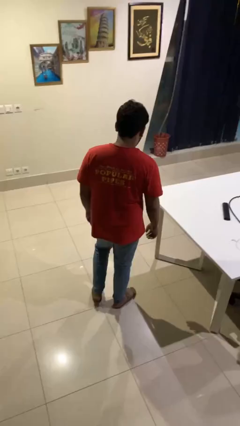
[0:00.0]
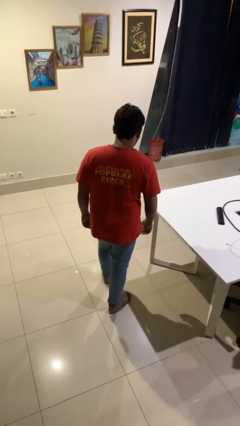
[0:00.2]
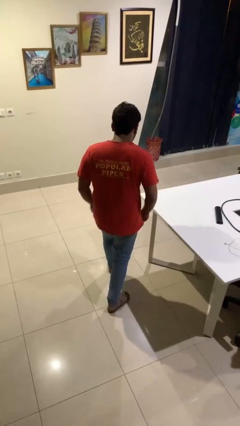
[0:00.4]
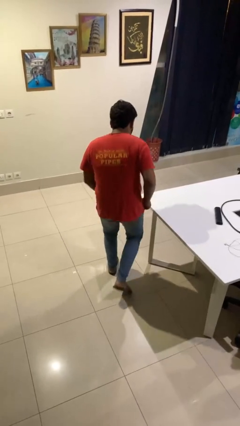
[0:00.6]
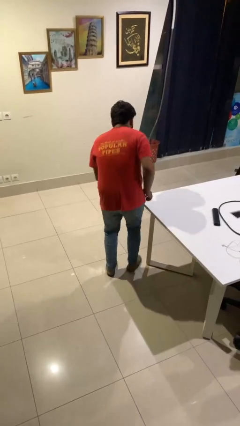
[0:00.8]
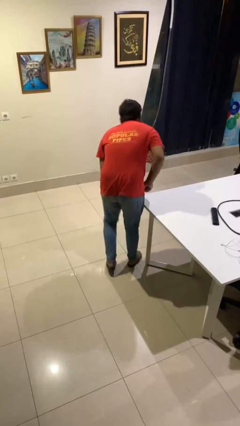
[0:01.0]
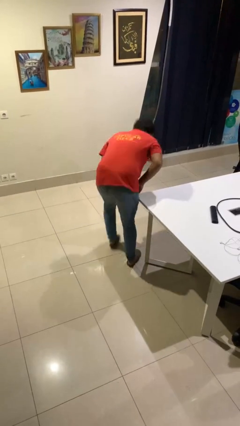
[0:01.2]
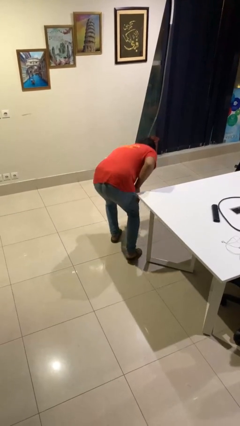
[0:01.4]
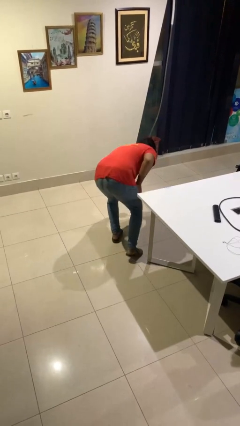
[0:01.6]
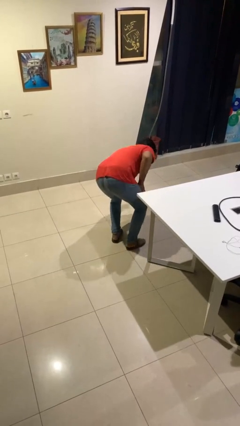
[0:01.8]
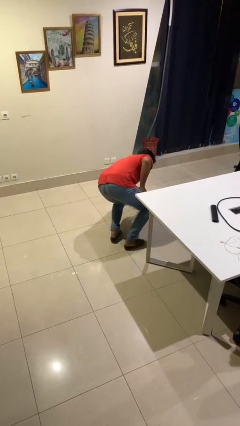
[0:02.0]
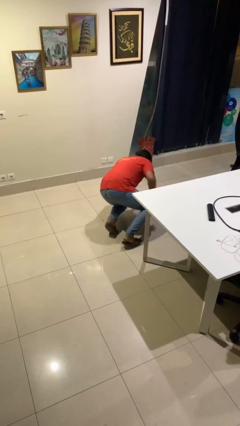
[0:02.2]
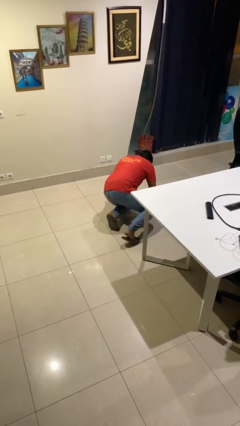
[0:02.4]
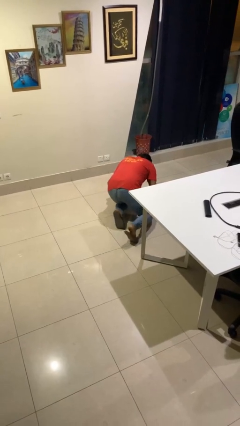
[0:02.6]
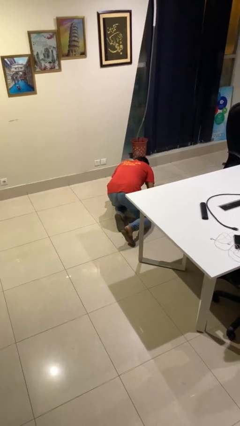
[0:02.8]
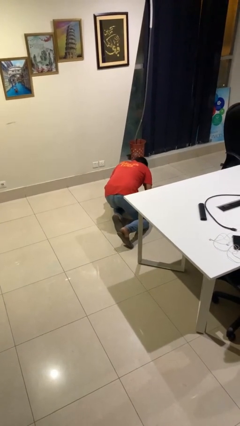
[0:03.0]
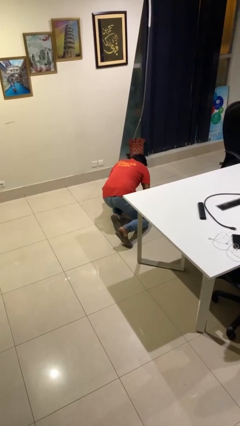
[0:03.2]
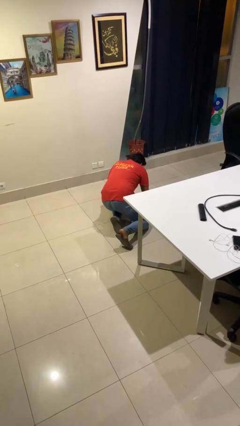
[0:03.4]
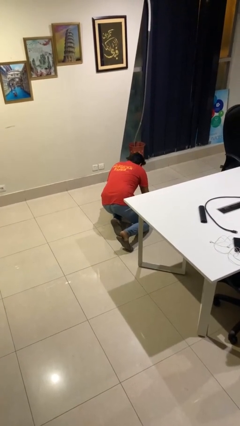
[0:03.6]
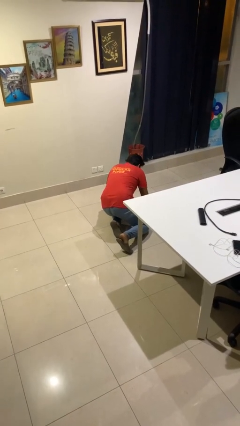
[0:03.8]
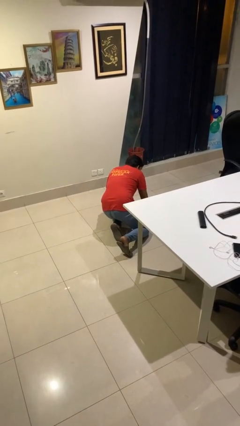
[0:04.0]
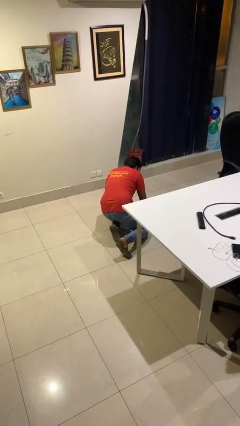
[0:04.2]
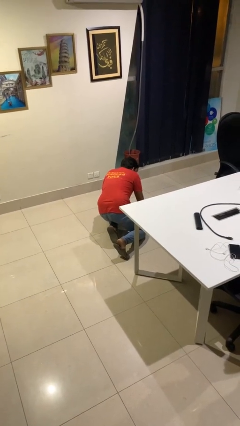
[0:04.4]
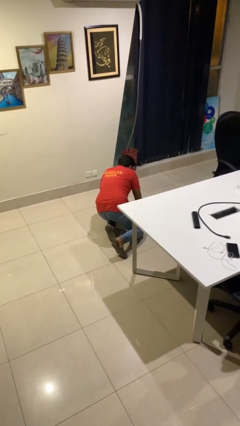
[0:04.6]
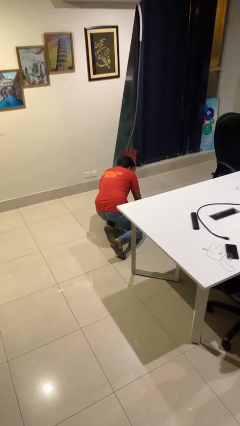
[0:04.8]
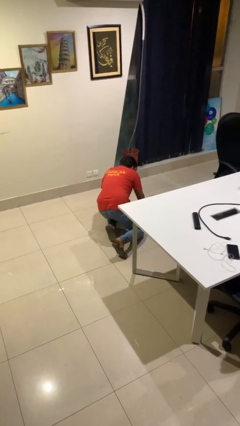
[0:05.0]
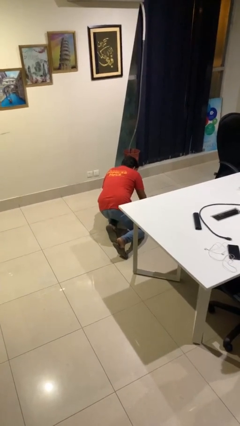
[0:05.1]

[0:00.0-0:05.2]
person trips on object on floor

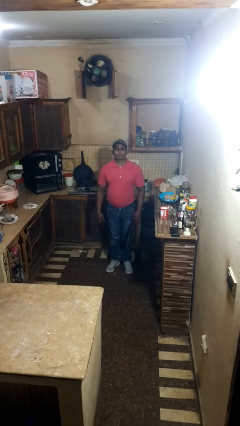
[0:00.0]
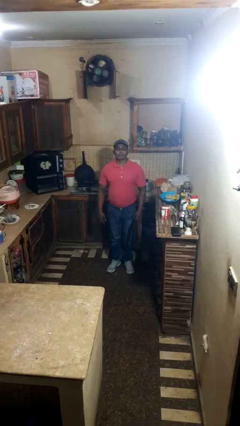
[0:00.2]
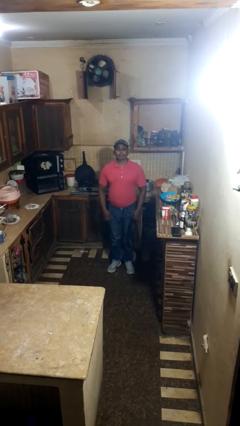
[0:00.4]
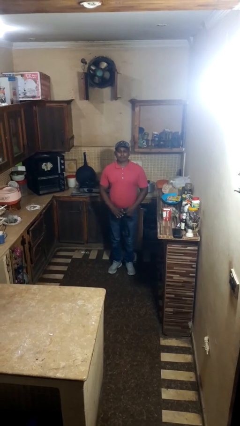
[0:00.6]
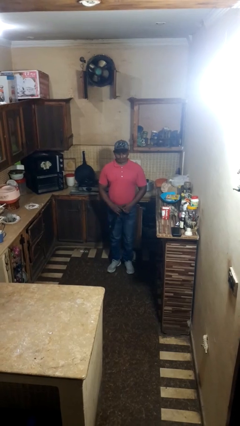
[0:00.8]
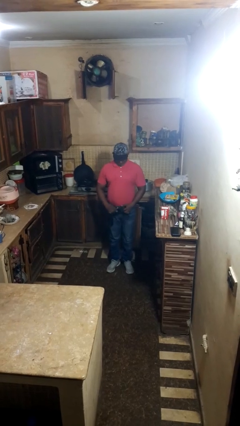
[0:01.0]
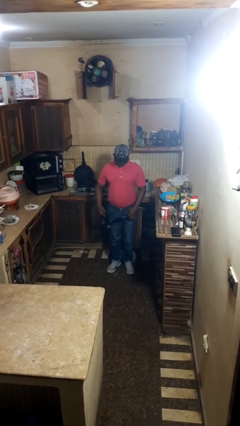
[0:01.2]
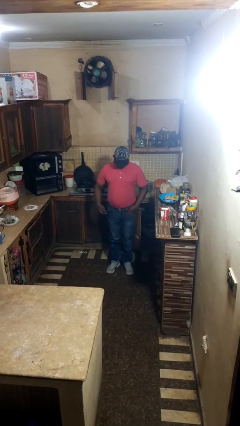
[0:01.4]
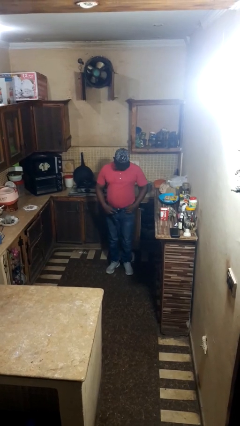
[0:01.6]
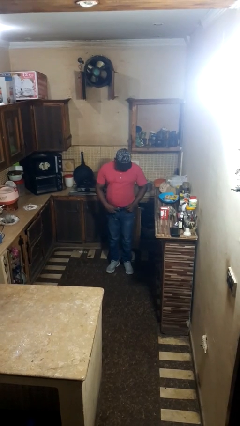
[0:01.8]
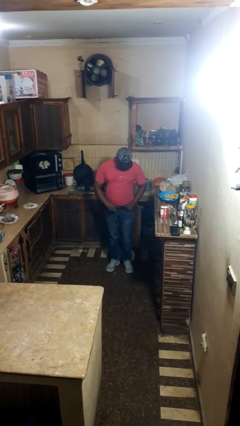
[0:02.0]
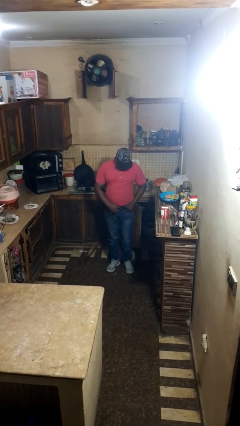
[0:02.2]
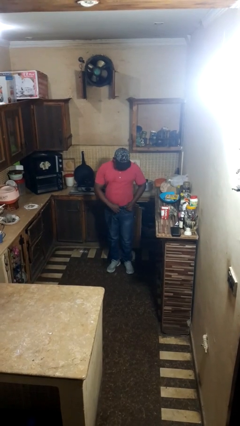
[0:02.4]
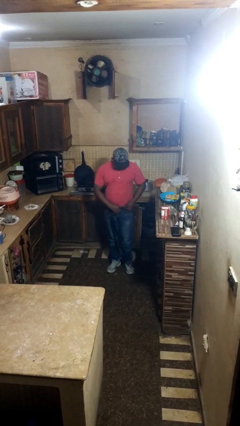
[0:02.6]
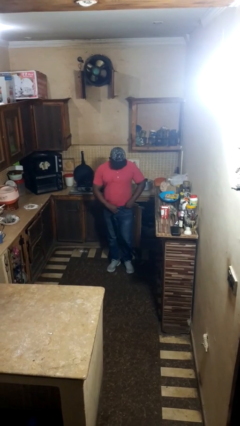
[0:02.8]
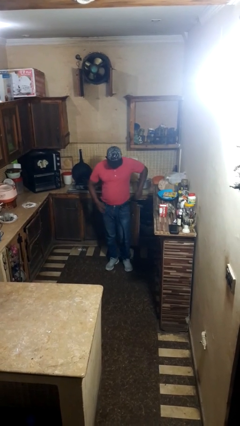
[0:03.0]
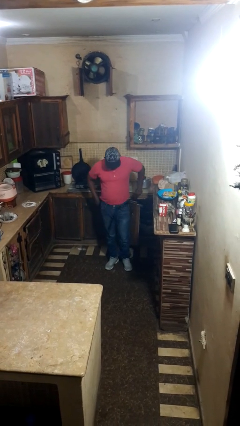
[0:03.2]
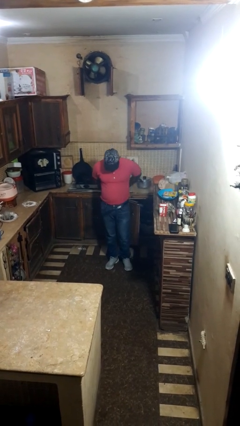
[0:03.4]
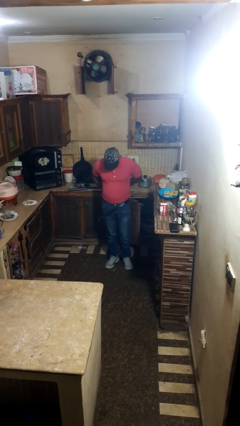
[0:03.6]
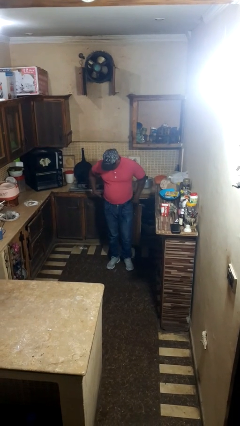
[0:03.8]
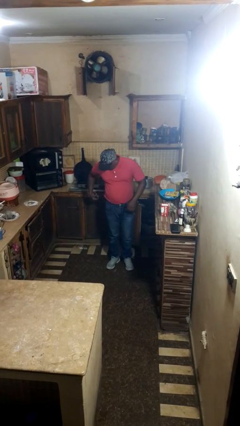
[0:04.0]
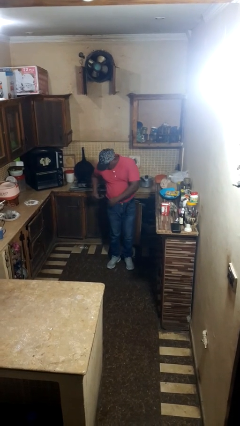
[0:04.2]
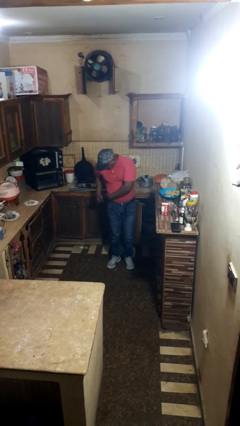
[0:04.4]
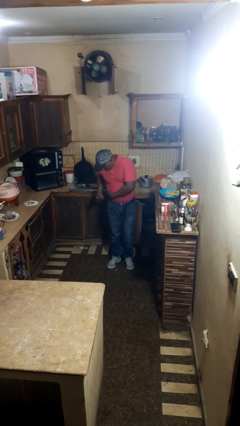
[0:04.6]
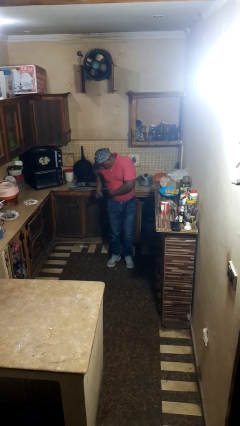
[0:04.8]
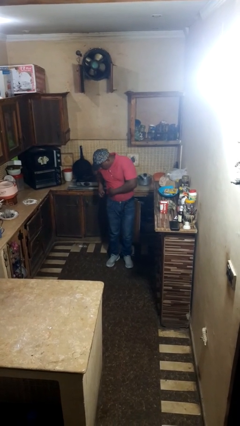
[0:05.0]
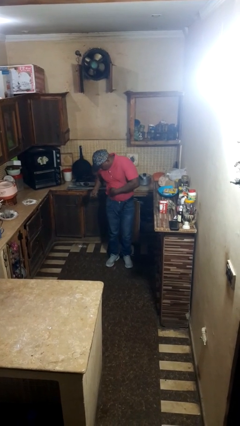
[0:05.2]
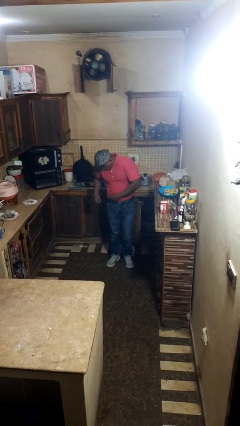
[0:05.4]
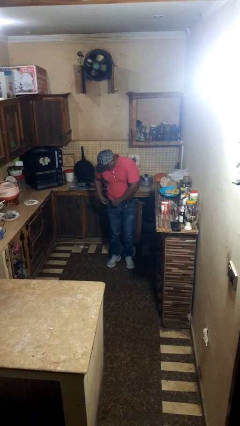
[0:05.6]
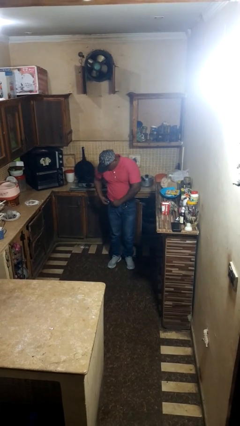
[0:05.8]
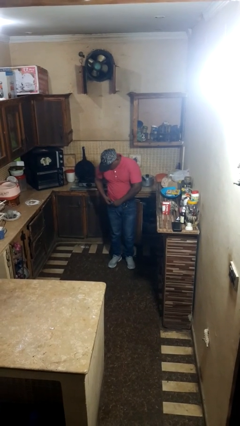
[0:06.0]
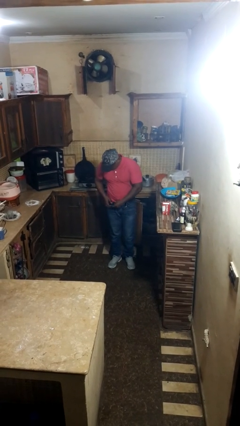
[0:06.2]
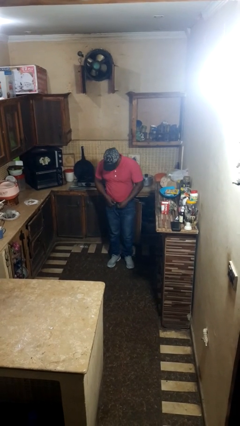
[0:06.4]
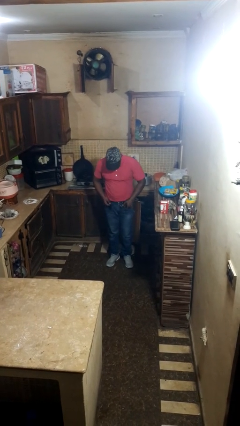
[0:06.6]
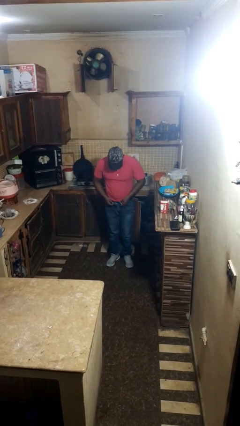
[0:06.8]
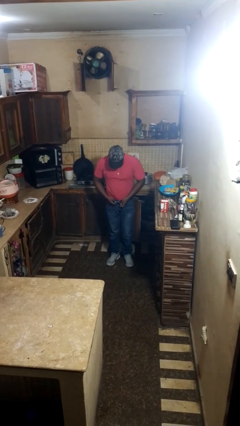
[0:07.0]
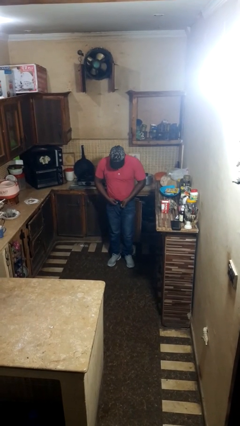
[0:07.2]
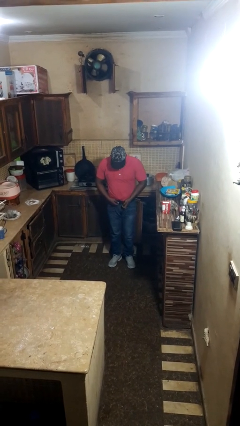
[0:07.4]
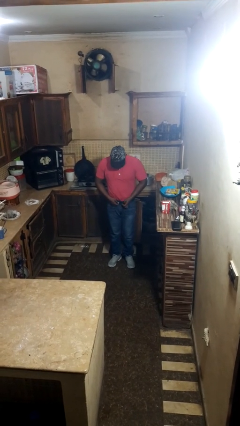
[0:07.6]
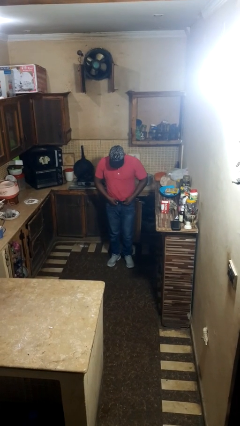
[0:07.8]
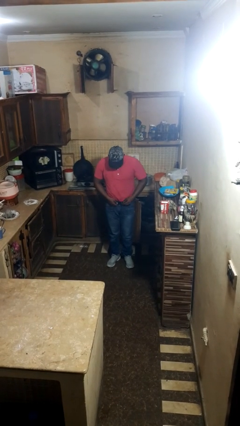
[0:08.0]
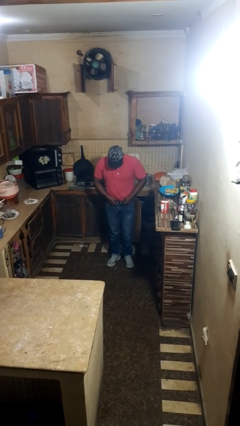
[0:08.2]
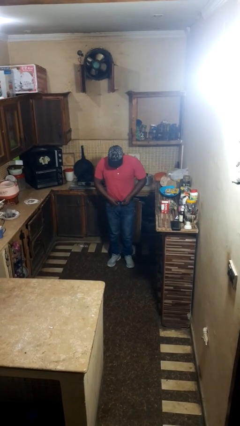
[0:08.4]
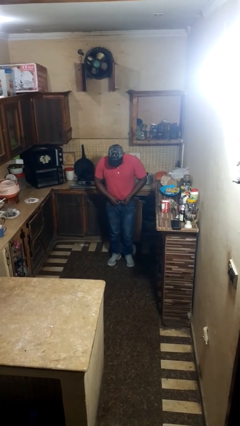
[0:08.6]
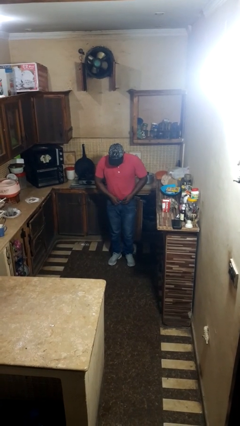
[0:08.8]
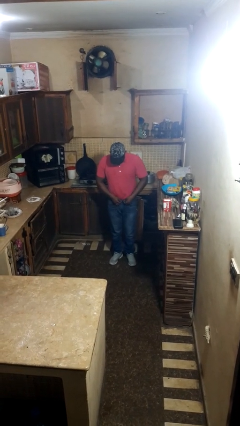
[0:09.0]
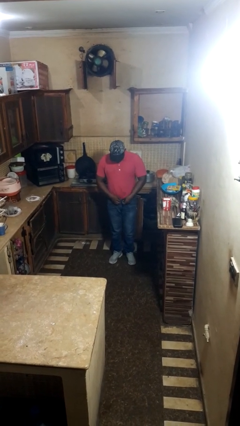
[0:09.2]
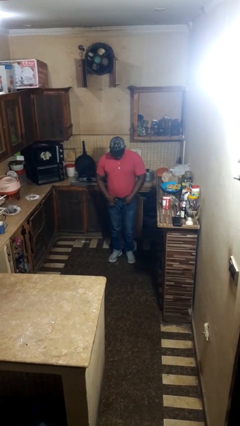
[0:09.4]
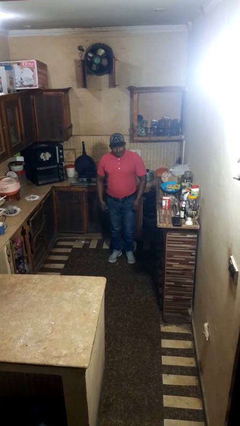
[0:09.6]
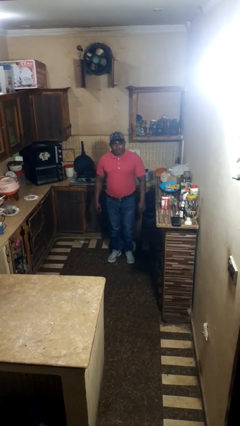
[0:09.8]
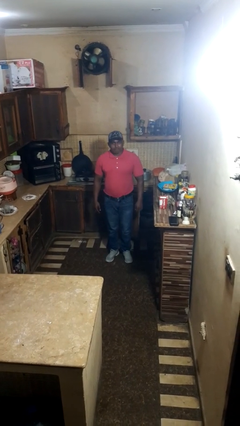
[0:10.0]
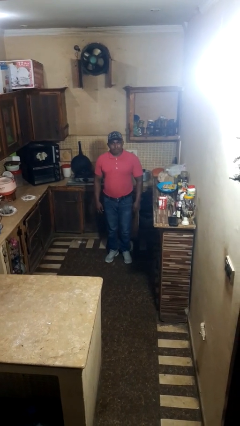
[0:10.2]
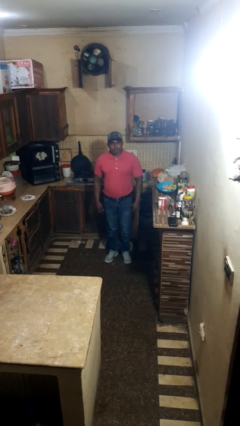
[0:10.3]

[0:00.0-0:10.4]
person puts on belt

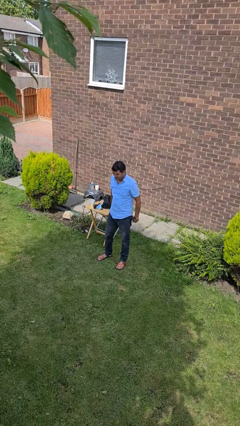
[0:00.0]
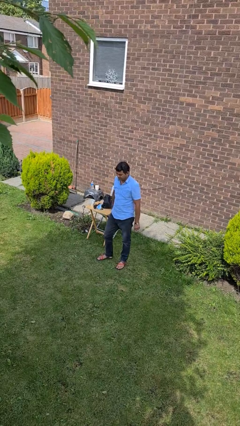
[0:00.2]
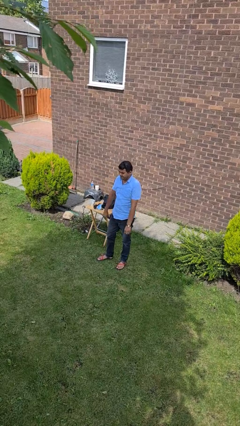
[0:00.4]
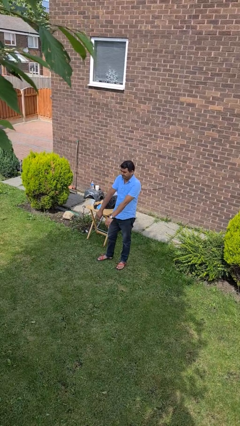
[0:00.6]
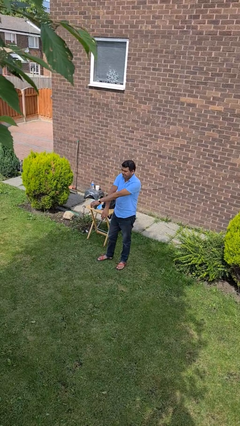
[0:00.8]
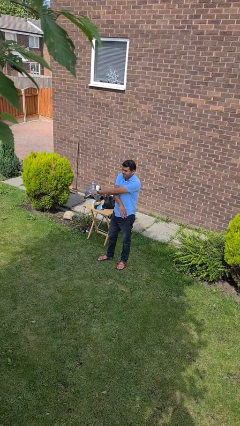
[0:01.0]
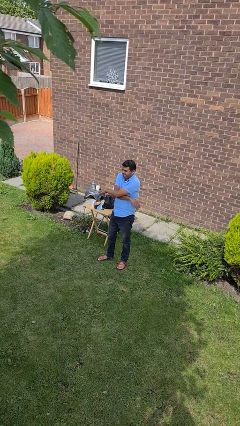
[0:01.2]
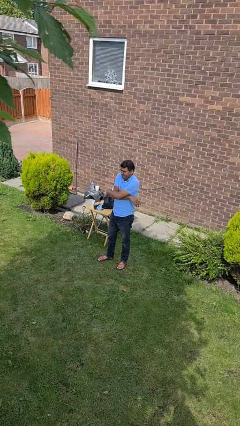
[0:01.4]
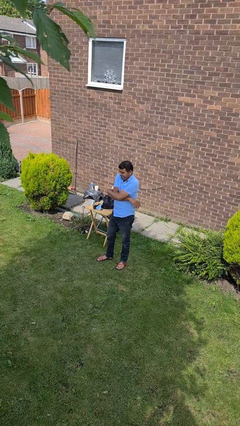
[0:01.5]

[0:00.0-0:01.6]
person crosses arms

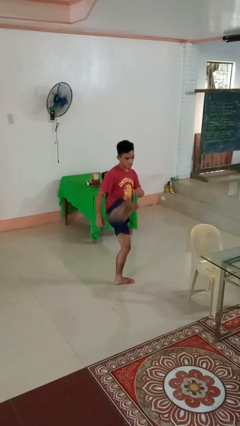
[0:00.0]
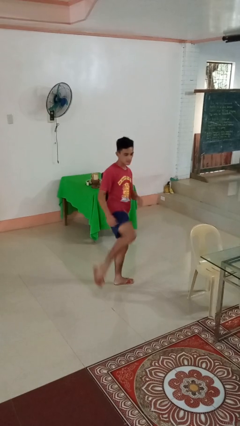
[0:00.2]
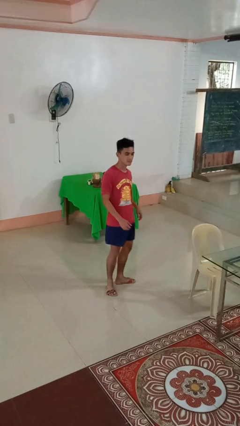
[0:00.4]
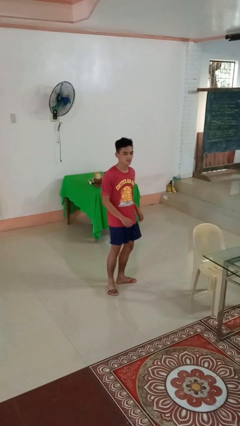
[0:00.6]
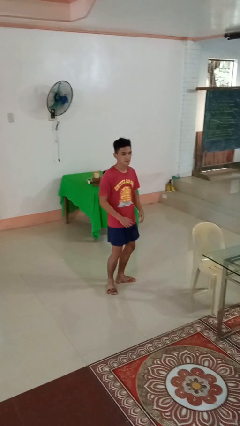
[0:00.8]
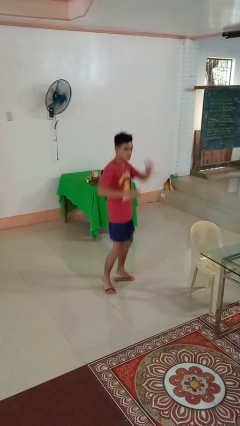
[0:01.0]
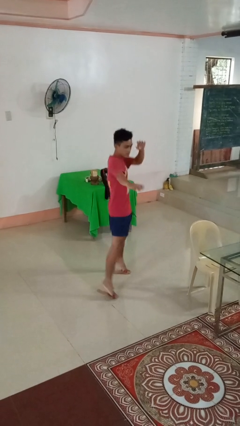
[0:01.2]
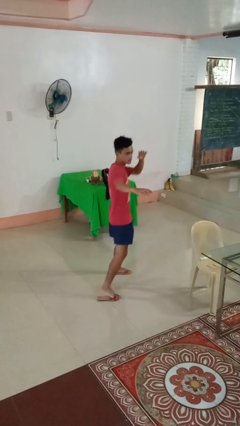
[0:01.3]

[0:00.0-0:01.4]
person karate kicks
